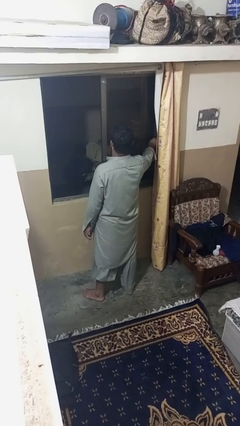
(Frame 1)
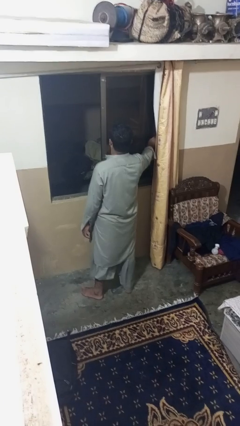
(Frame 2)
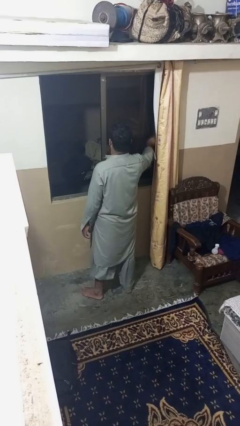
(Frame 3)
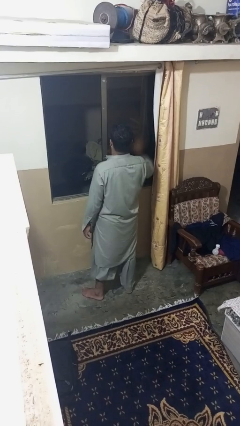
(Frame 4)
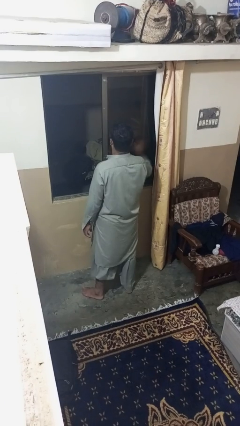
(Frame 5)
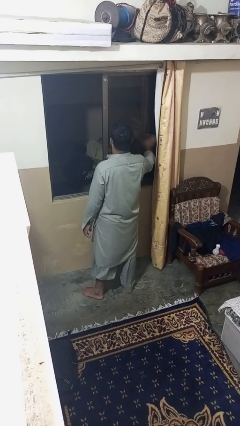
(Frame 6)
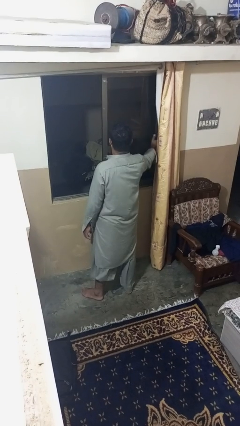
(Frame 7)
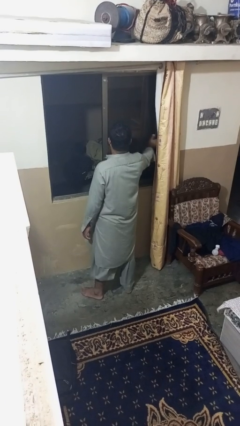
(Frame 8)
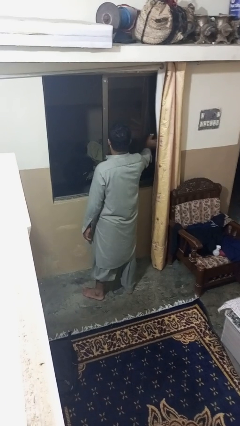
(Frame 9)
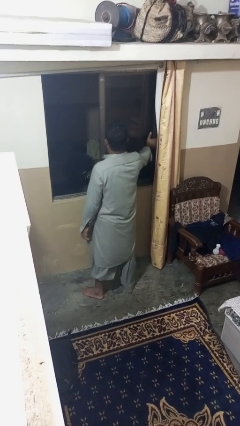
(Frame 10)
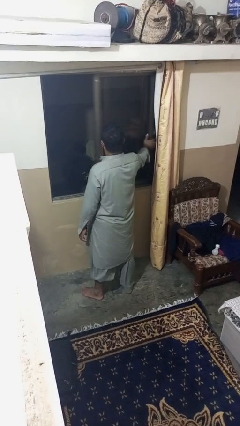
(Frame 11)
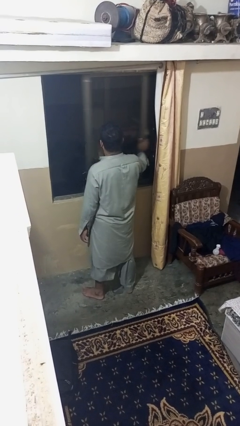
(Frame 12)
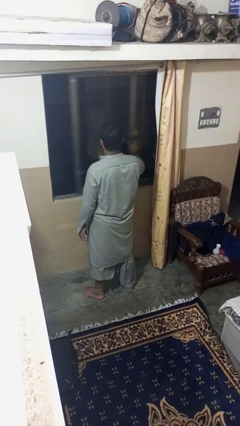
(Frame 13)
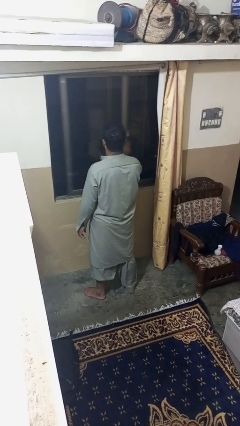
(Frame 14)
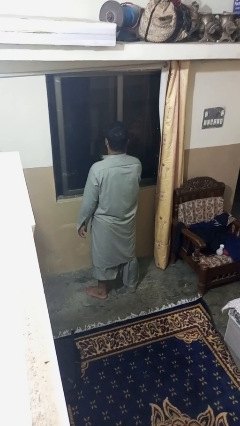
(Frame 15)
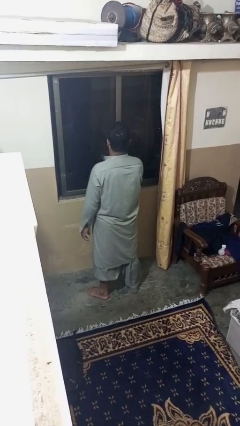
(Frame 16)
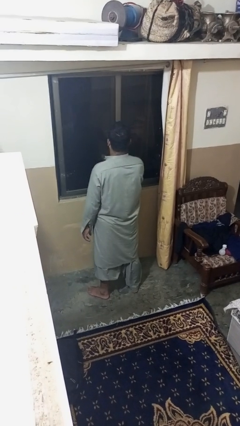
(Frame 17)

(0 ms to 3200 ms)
person closes home window

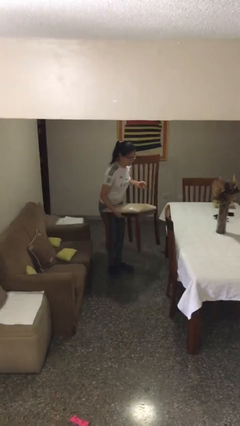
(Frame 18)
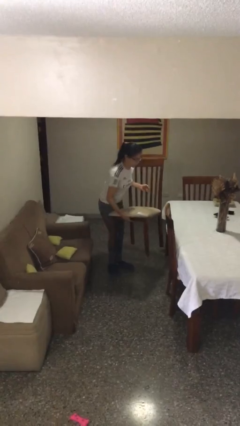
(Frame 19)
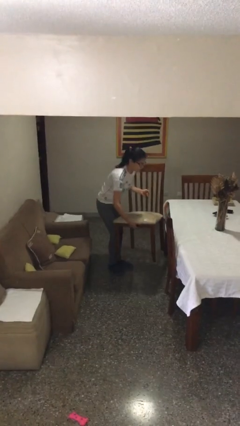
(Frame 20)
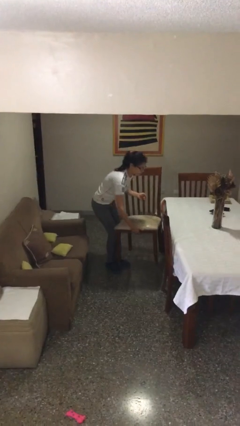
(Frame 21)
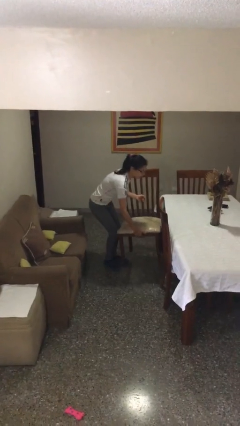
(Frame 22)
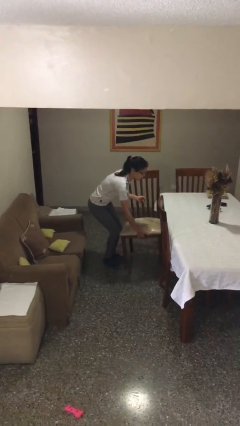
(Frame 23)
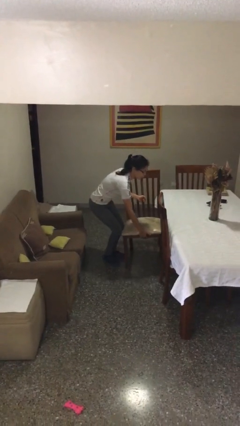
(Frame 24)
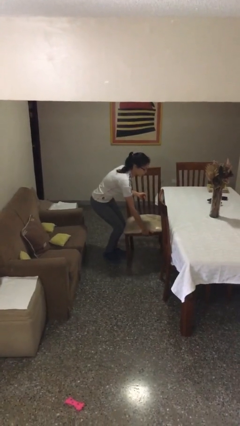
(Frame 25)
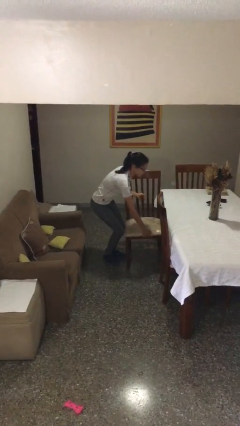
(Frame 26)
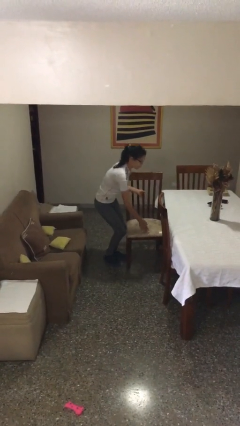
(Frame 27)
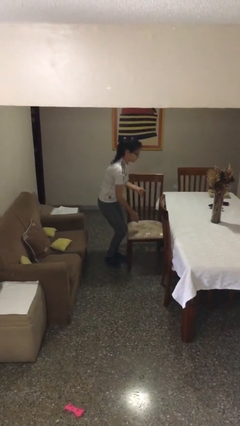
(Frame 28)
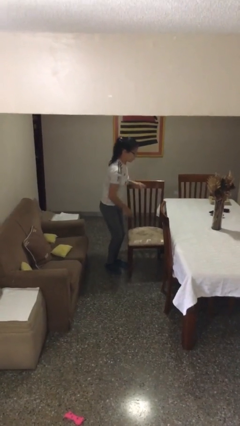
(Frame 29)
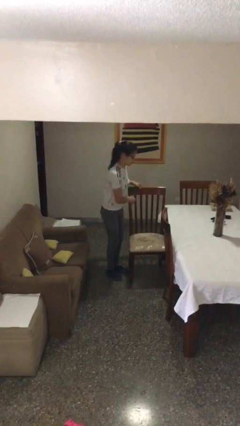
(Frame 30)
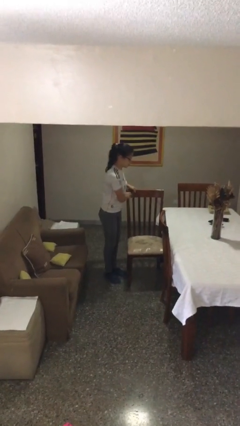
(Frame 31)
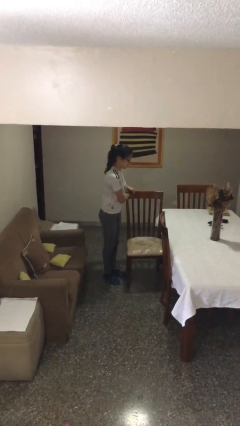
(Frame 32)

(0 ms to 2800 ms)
person puts down object on floor

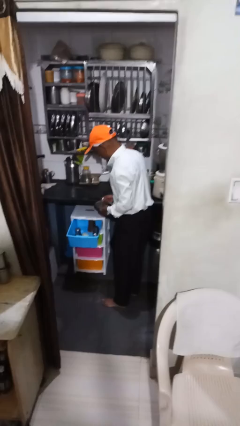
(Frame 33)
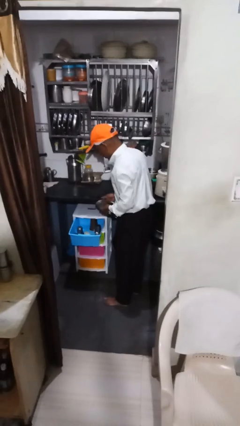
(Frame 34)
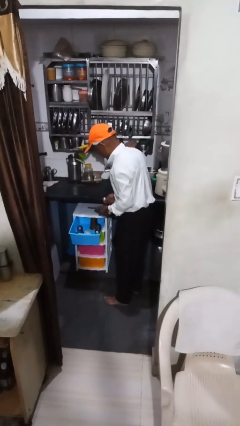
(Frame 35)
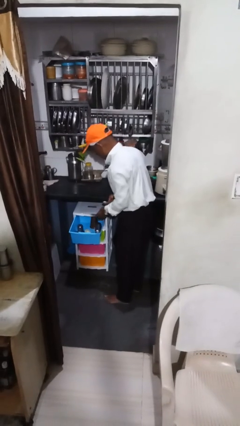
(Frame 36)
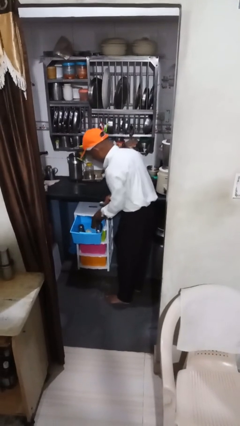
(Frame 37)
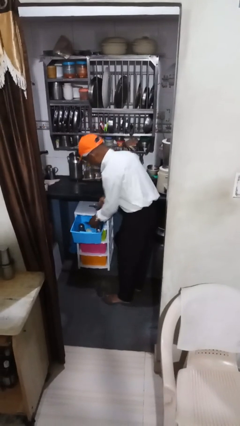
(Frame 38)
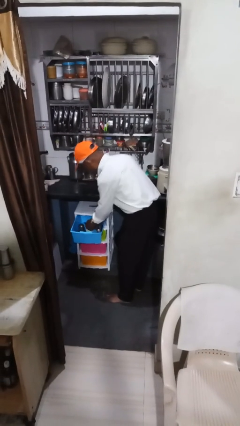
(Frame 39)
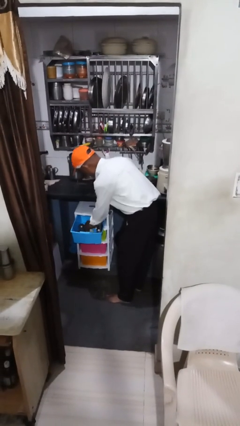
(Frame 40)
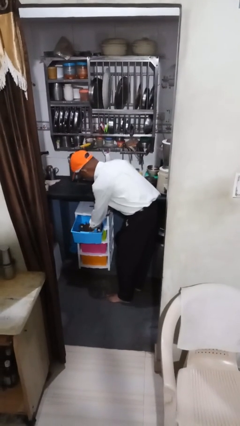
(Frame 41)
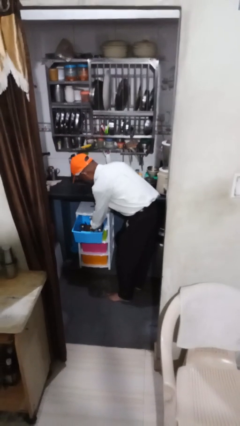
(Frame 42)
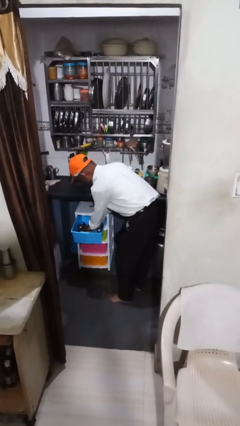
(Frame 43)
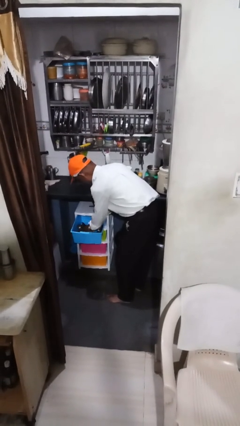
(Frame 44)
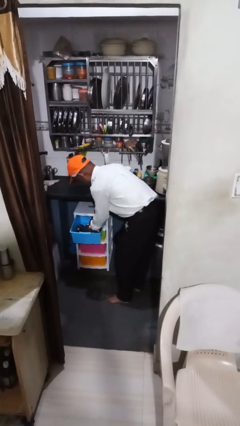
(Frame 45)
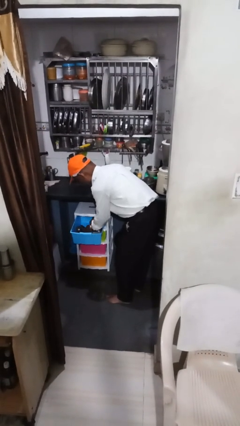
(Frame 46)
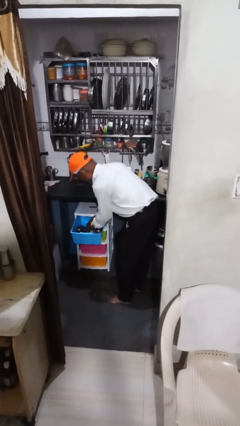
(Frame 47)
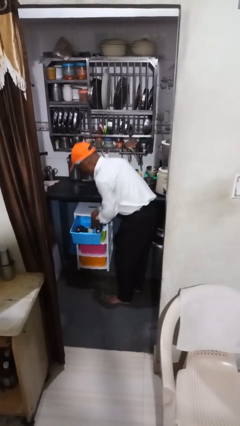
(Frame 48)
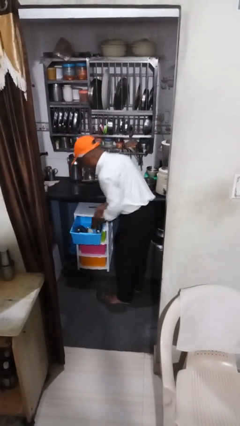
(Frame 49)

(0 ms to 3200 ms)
person puts object into kitchen drawer

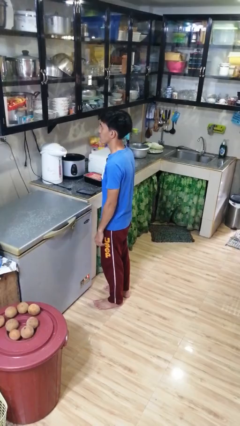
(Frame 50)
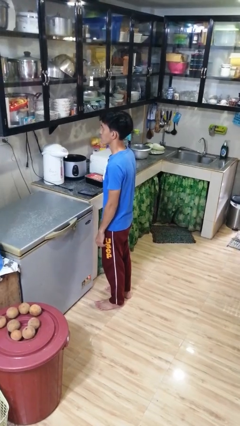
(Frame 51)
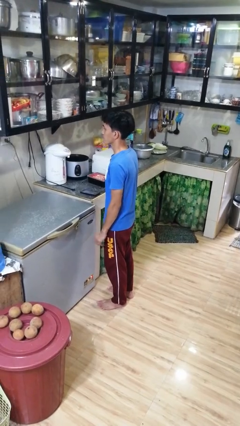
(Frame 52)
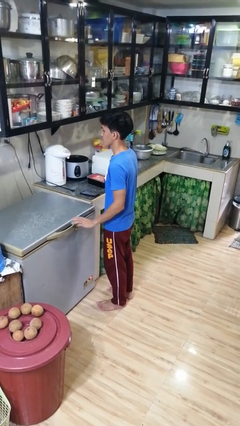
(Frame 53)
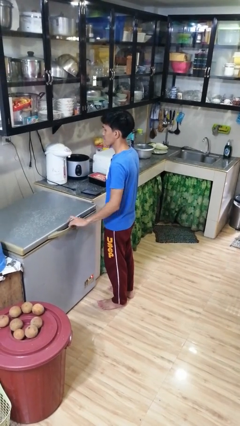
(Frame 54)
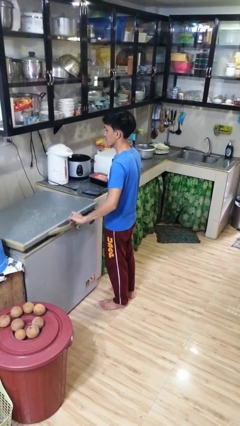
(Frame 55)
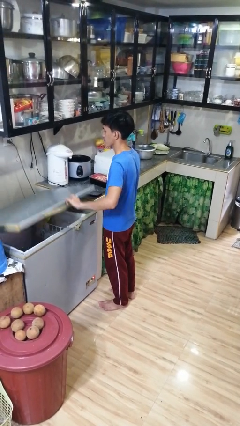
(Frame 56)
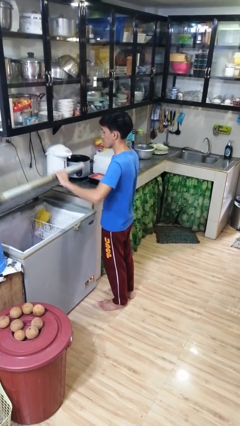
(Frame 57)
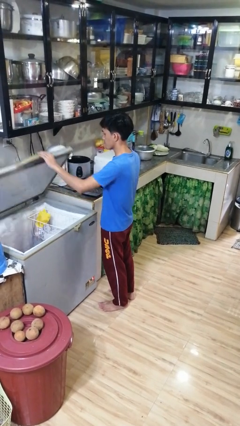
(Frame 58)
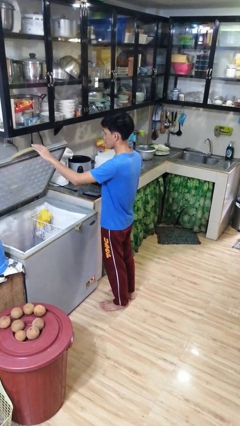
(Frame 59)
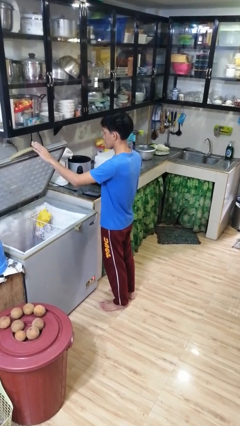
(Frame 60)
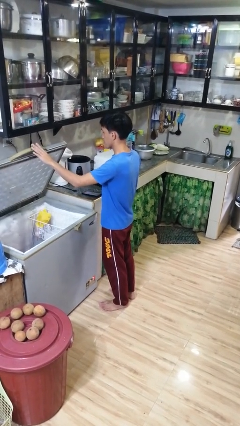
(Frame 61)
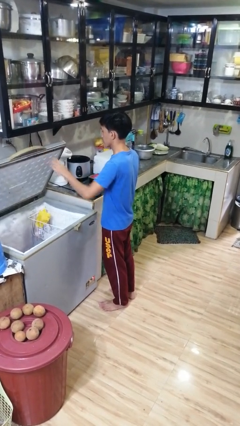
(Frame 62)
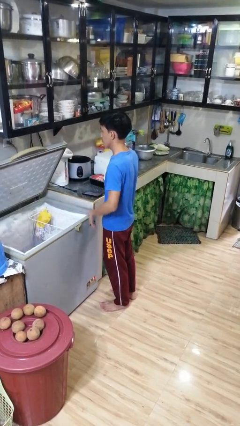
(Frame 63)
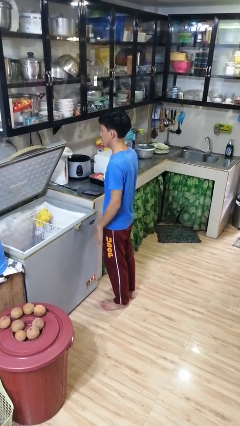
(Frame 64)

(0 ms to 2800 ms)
person opens refrigerator

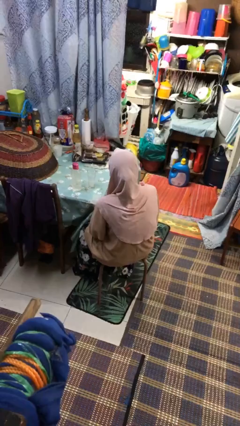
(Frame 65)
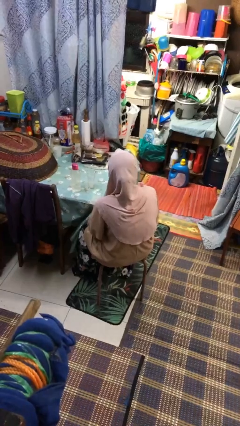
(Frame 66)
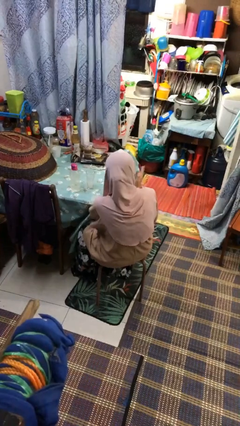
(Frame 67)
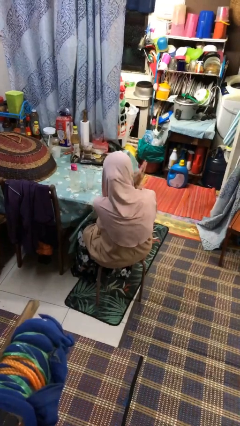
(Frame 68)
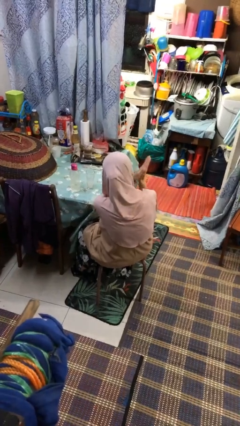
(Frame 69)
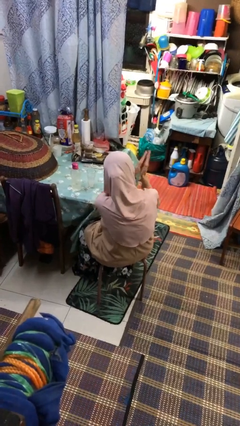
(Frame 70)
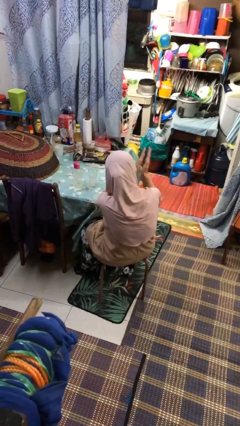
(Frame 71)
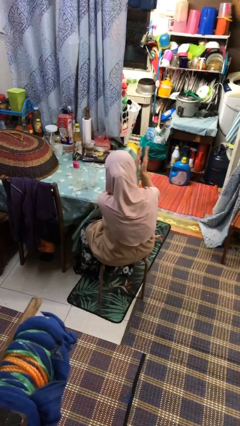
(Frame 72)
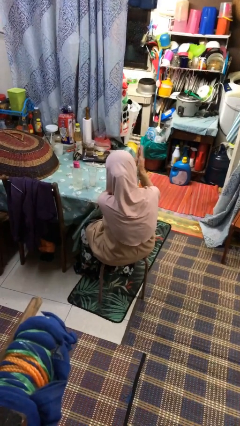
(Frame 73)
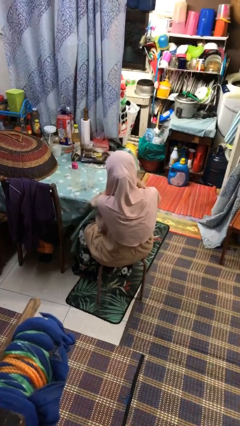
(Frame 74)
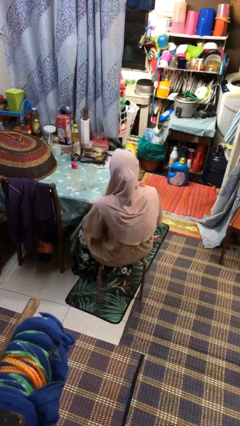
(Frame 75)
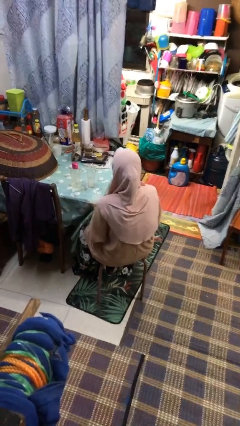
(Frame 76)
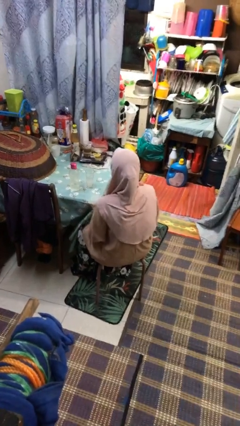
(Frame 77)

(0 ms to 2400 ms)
person claps hands

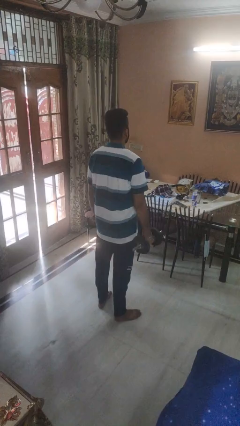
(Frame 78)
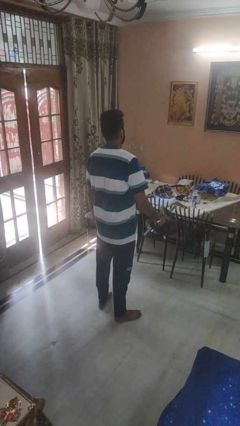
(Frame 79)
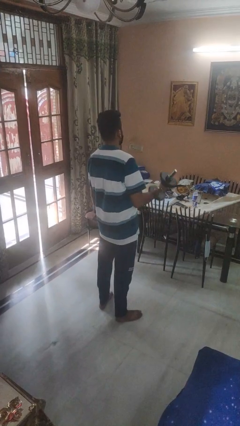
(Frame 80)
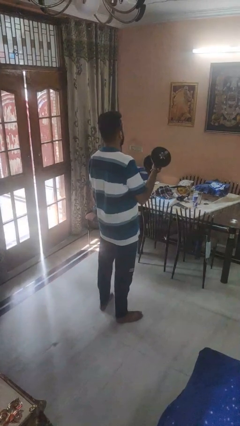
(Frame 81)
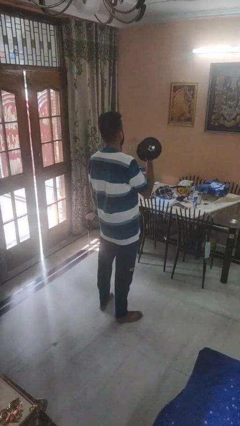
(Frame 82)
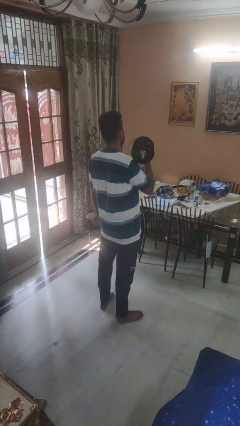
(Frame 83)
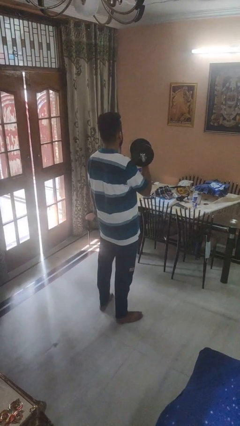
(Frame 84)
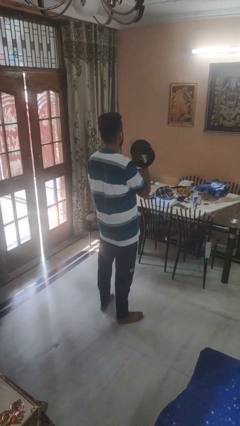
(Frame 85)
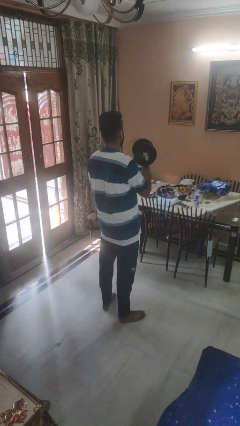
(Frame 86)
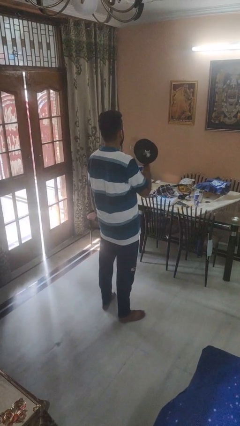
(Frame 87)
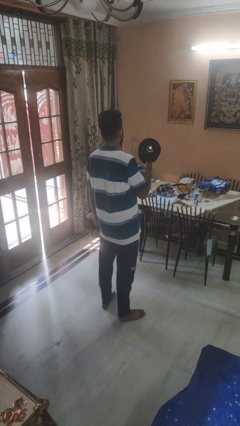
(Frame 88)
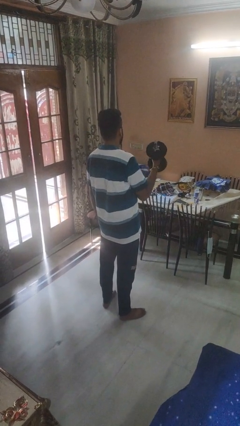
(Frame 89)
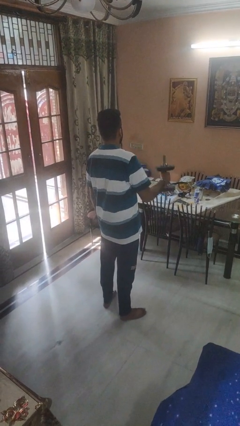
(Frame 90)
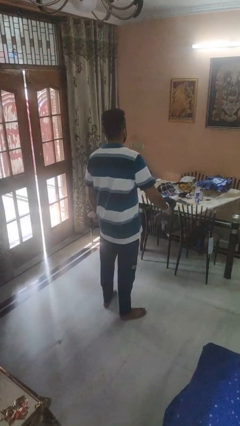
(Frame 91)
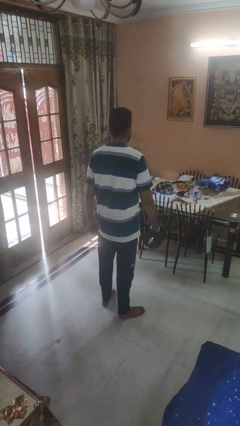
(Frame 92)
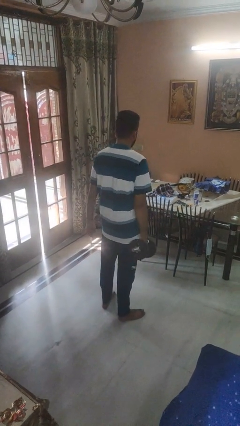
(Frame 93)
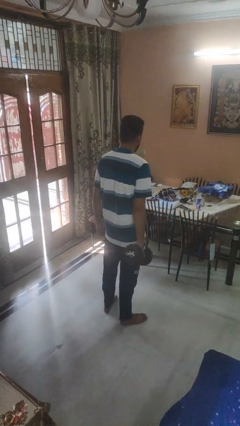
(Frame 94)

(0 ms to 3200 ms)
person lifts dumbbells
